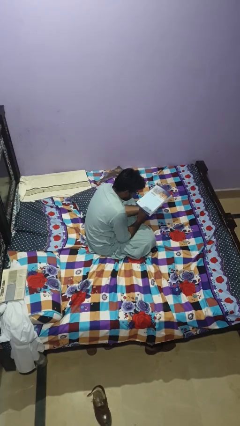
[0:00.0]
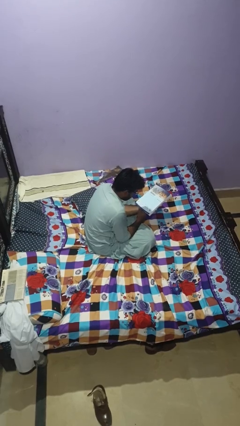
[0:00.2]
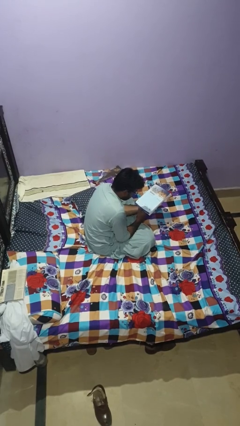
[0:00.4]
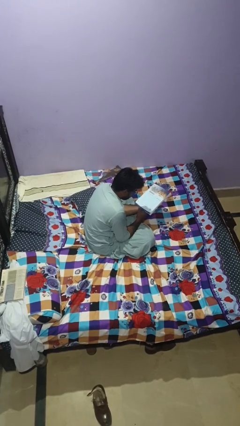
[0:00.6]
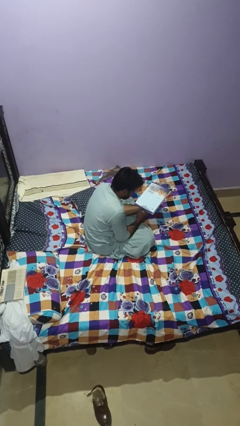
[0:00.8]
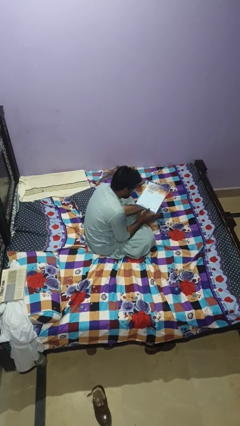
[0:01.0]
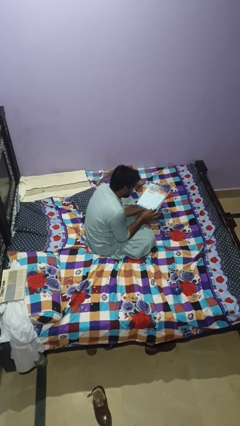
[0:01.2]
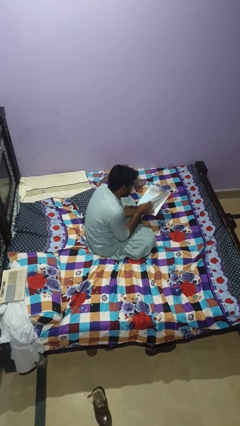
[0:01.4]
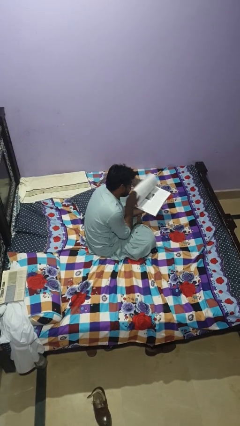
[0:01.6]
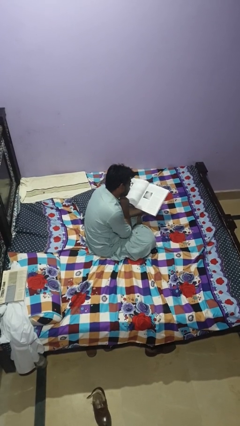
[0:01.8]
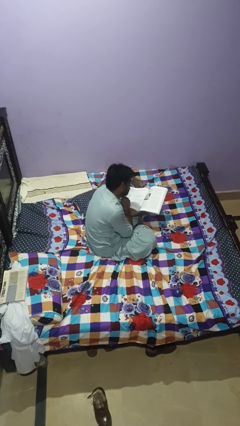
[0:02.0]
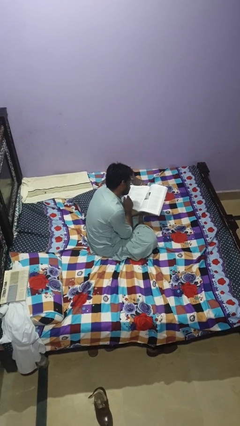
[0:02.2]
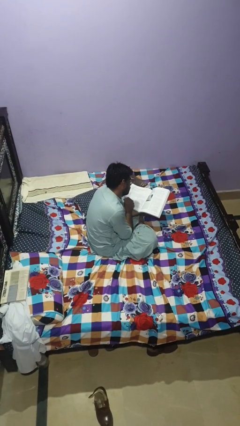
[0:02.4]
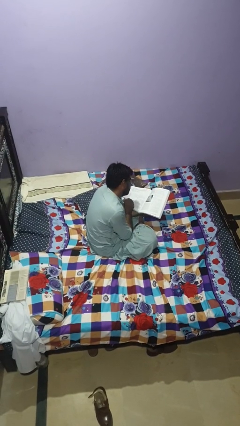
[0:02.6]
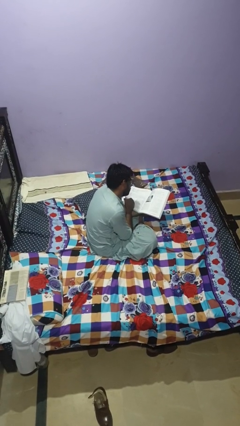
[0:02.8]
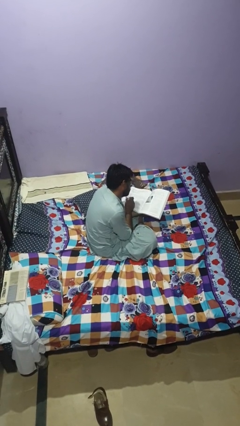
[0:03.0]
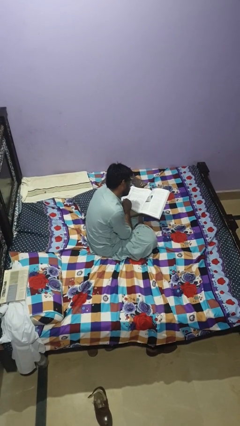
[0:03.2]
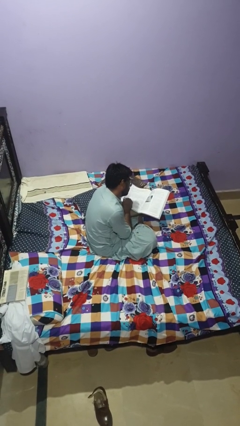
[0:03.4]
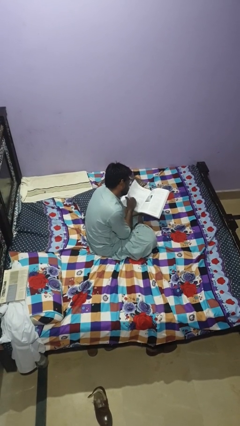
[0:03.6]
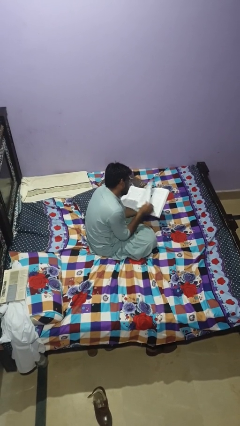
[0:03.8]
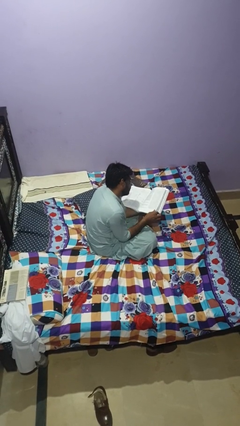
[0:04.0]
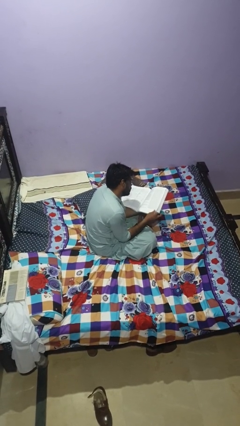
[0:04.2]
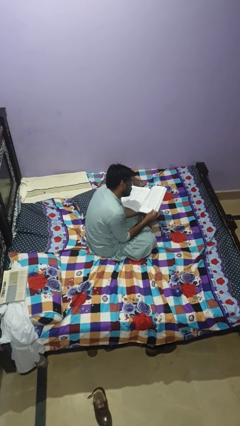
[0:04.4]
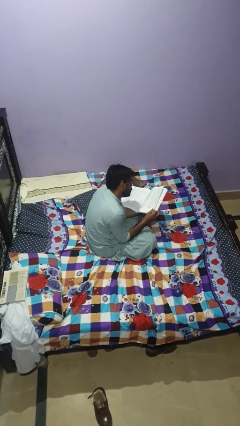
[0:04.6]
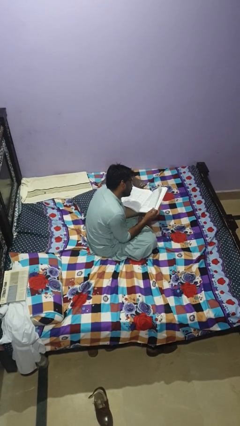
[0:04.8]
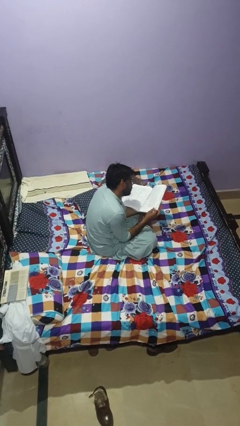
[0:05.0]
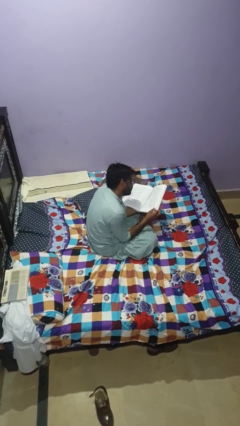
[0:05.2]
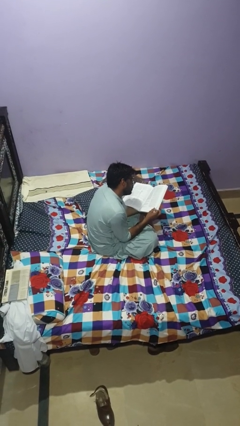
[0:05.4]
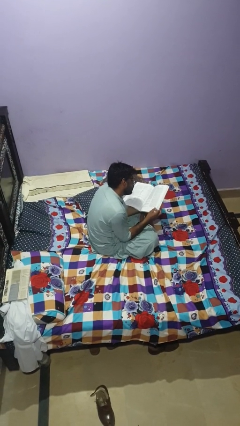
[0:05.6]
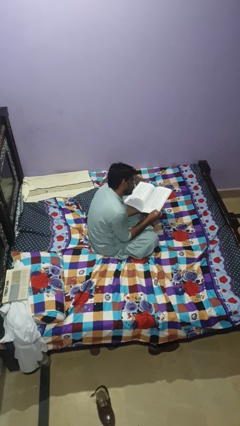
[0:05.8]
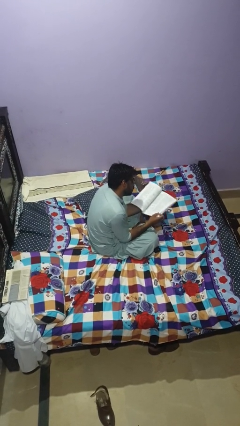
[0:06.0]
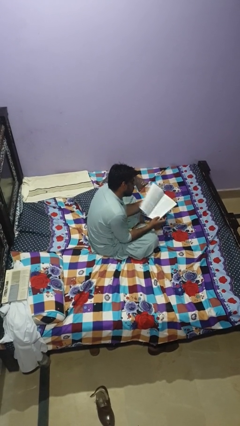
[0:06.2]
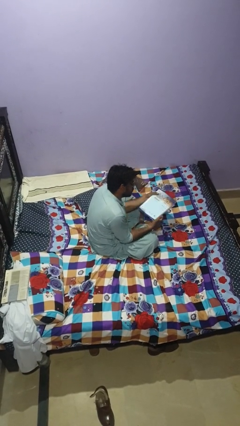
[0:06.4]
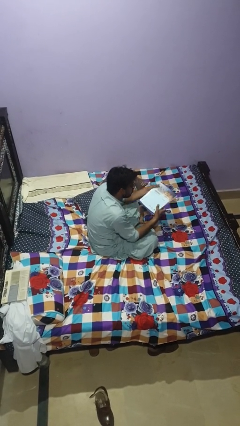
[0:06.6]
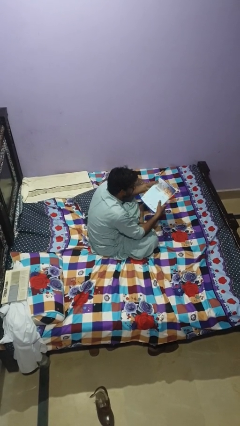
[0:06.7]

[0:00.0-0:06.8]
person reads magazine

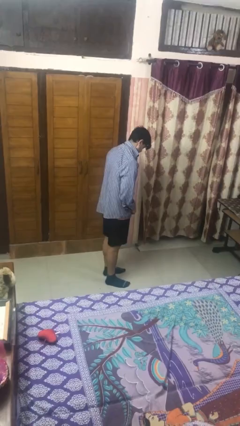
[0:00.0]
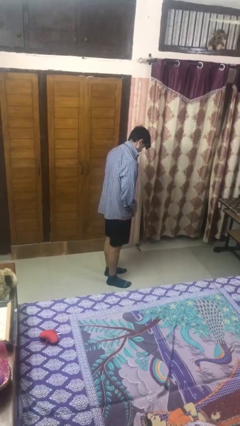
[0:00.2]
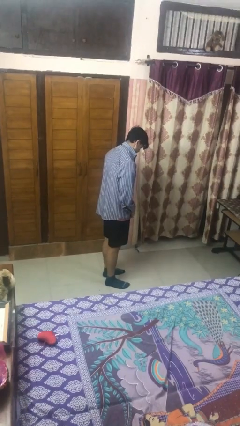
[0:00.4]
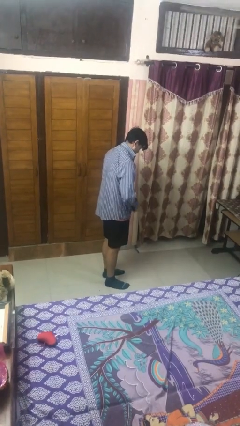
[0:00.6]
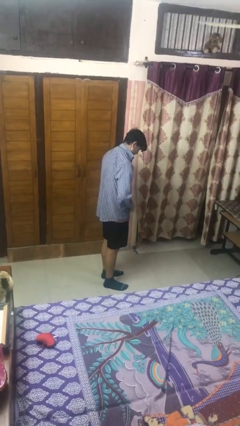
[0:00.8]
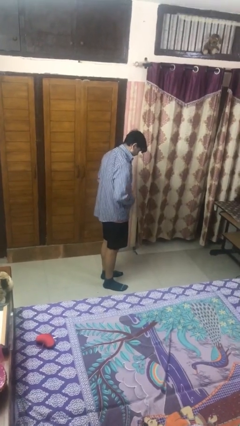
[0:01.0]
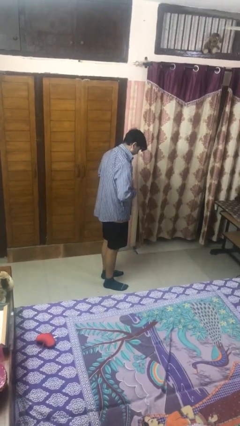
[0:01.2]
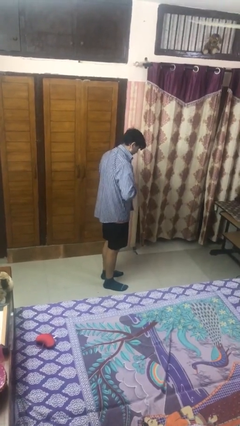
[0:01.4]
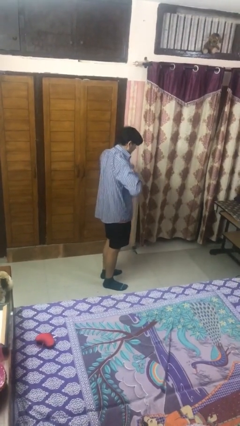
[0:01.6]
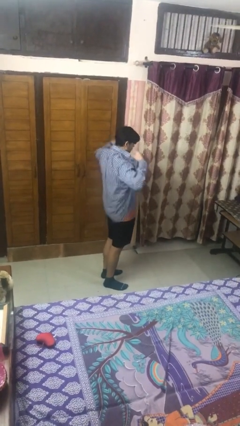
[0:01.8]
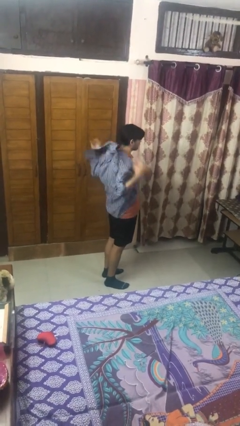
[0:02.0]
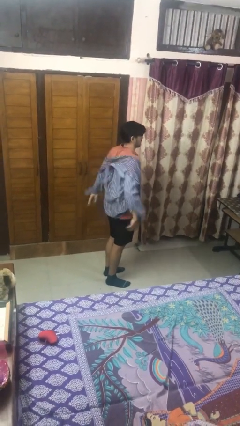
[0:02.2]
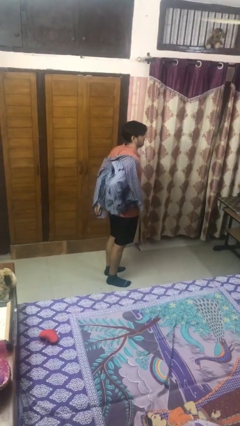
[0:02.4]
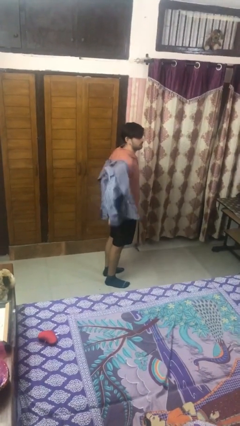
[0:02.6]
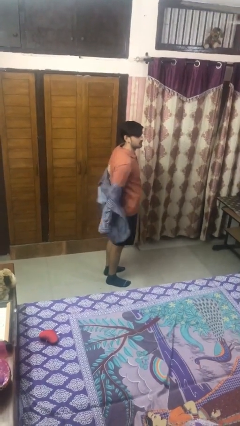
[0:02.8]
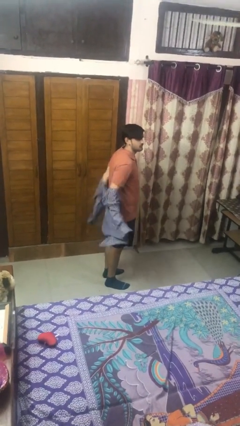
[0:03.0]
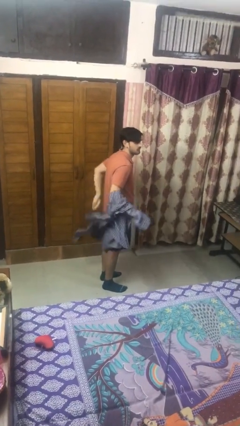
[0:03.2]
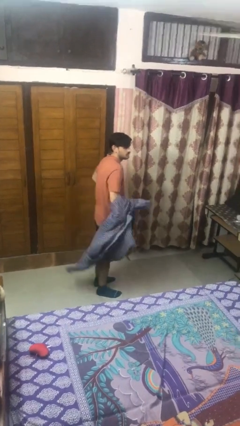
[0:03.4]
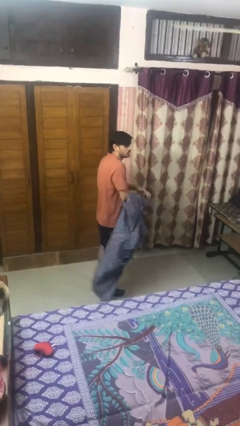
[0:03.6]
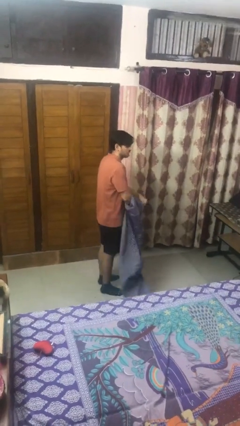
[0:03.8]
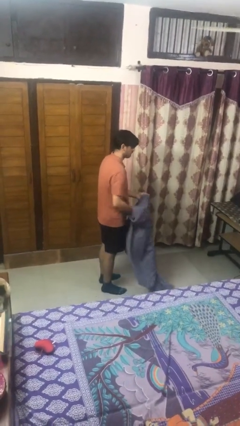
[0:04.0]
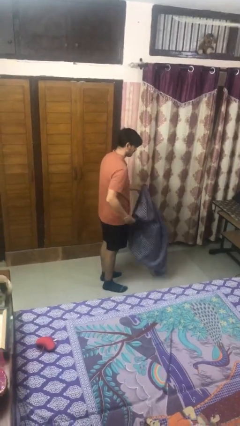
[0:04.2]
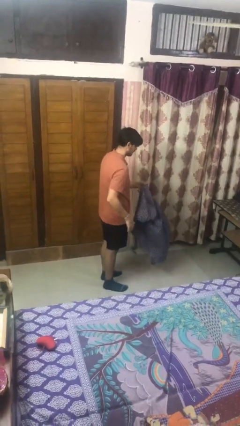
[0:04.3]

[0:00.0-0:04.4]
person takes off shirt

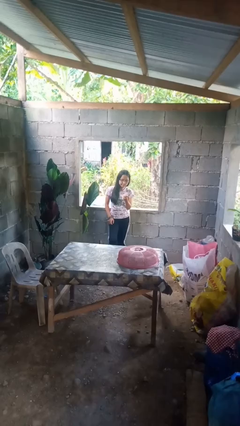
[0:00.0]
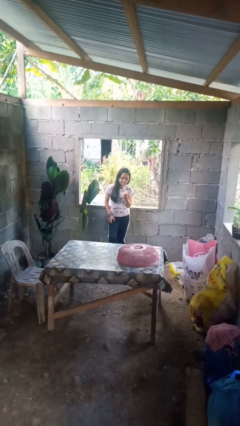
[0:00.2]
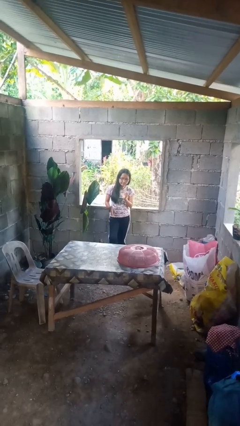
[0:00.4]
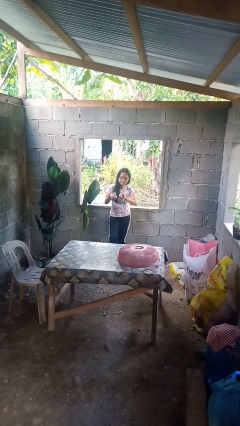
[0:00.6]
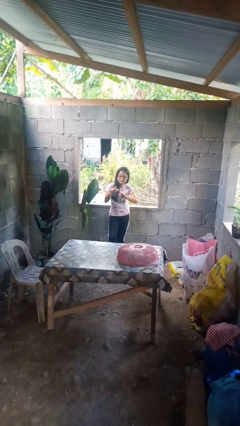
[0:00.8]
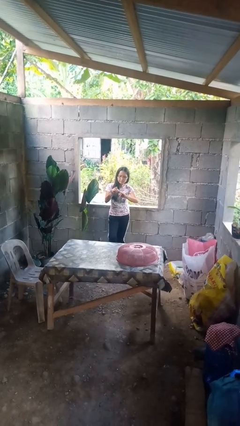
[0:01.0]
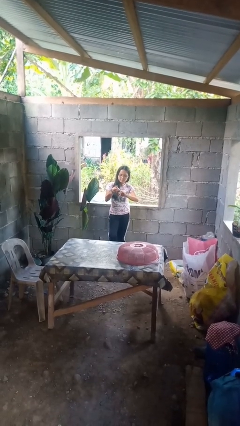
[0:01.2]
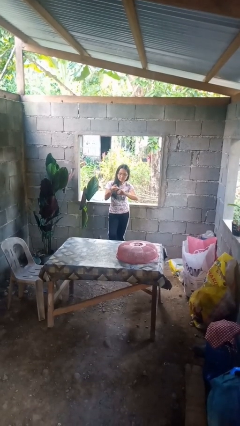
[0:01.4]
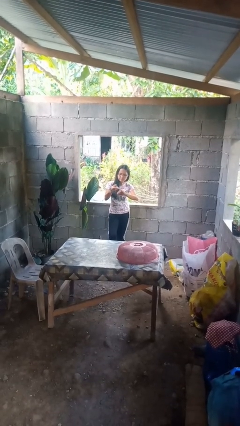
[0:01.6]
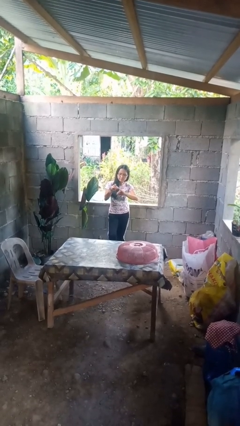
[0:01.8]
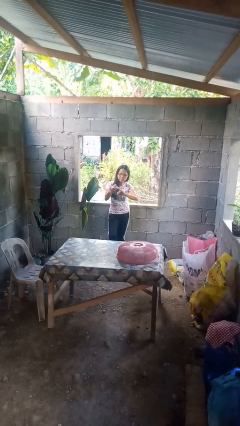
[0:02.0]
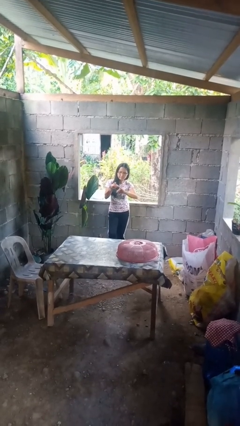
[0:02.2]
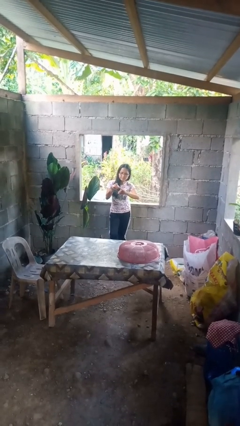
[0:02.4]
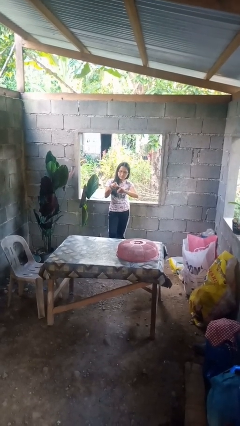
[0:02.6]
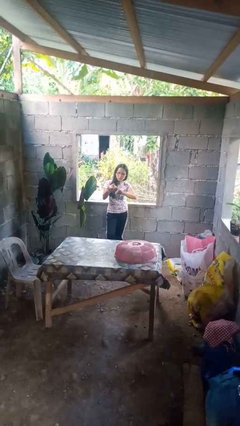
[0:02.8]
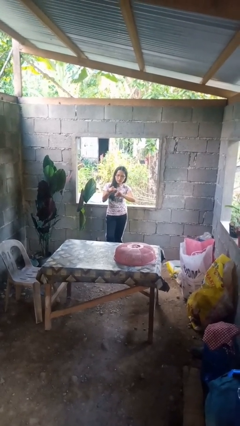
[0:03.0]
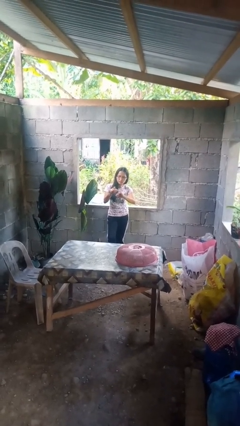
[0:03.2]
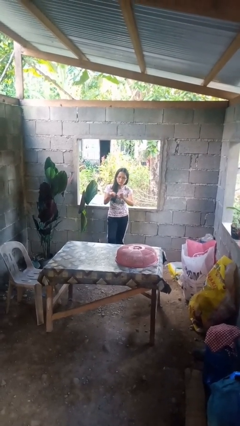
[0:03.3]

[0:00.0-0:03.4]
person clips fingernails

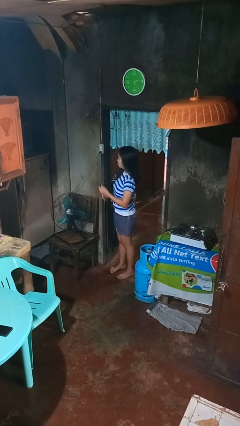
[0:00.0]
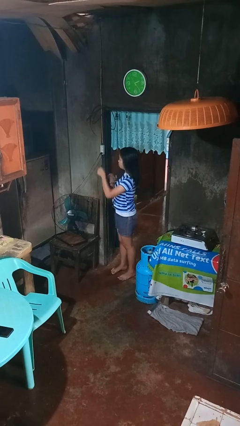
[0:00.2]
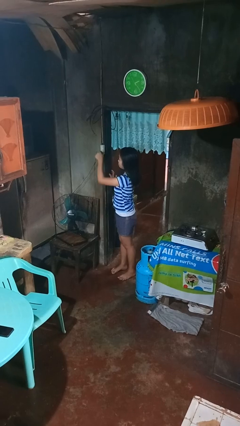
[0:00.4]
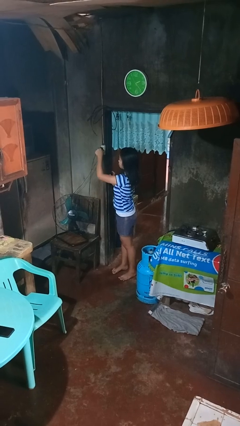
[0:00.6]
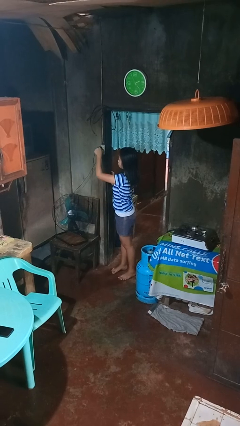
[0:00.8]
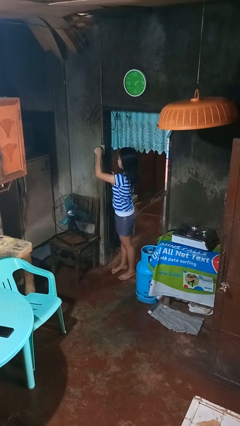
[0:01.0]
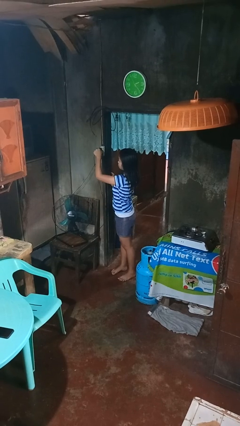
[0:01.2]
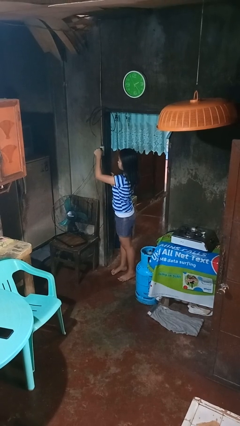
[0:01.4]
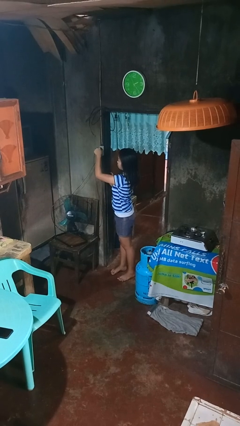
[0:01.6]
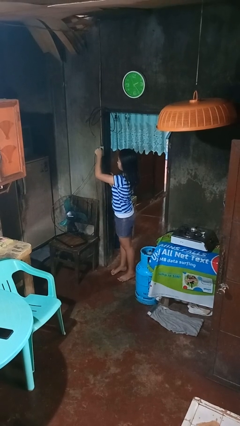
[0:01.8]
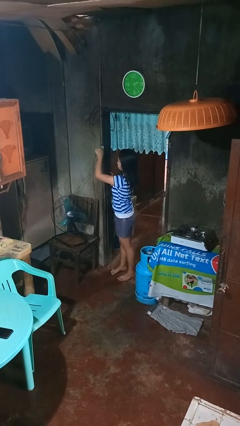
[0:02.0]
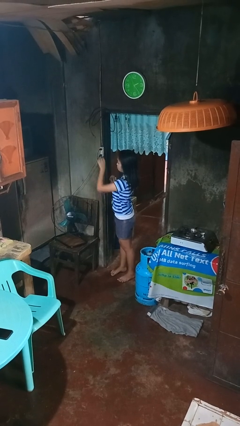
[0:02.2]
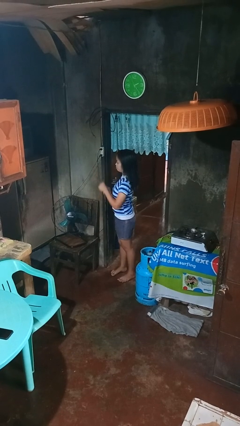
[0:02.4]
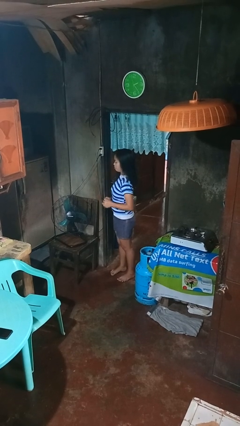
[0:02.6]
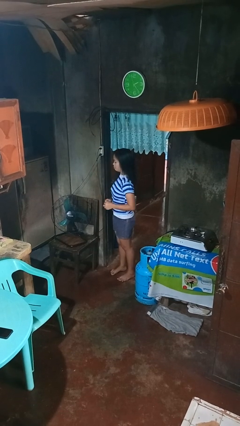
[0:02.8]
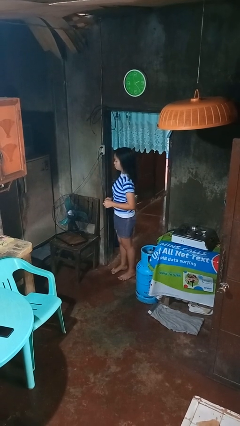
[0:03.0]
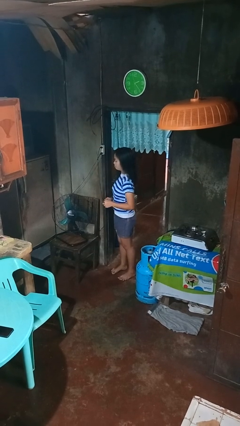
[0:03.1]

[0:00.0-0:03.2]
person plugs into electrical socket
